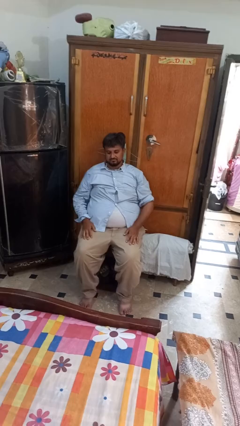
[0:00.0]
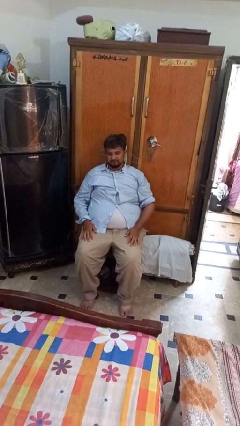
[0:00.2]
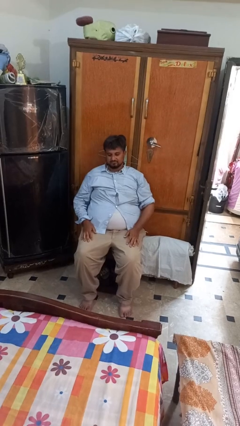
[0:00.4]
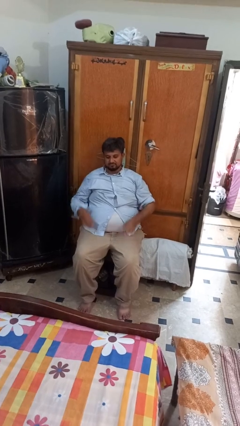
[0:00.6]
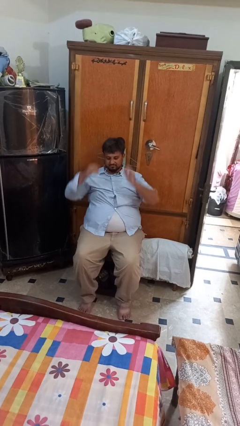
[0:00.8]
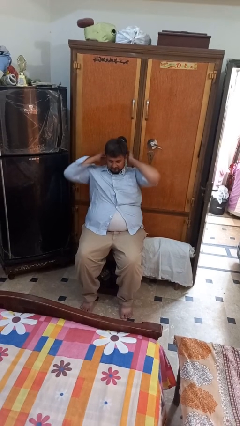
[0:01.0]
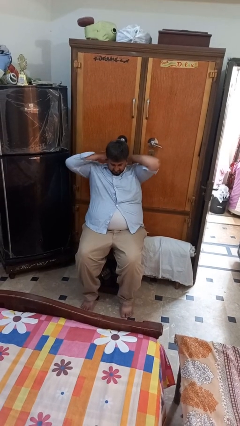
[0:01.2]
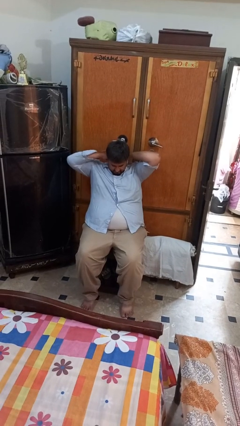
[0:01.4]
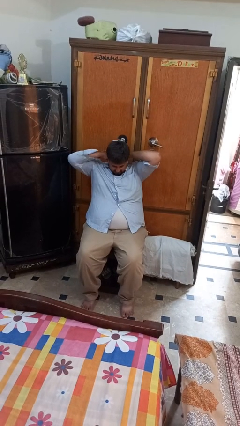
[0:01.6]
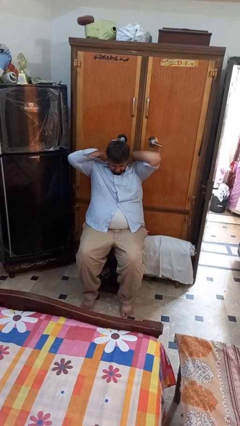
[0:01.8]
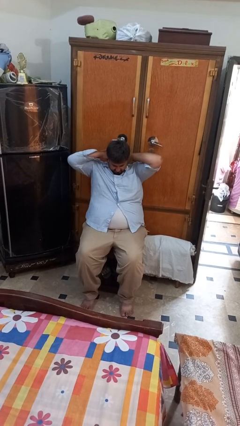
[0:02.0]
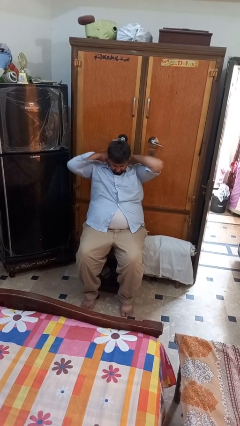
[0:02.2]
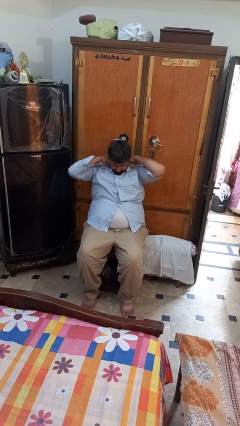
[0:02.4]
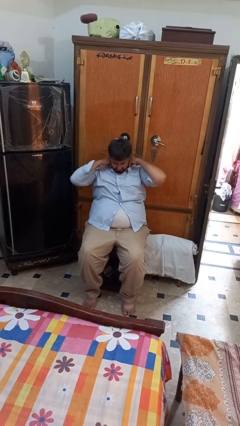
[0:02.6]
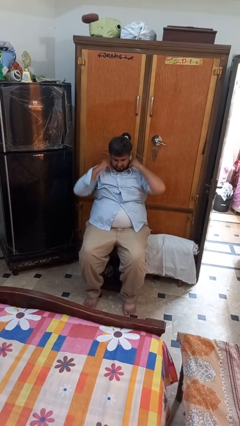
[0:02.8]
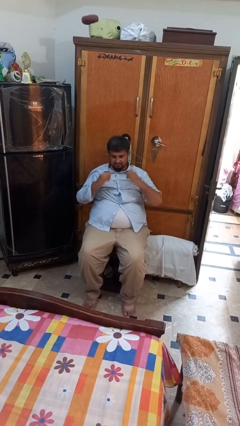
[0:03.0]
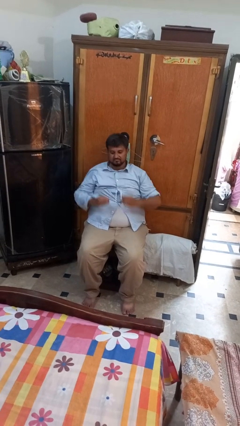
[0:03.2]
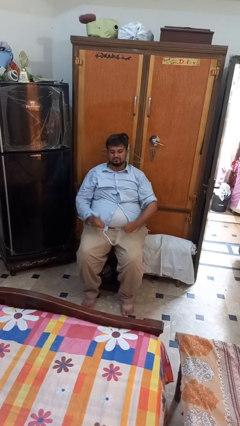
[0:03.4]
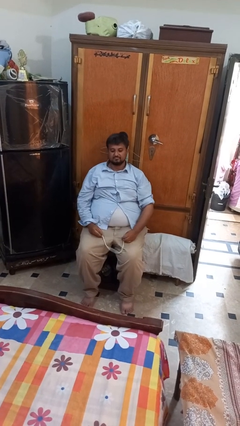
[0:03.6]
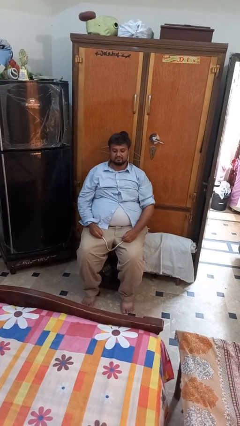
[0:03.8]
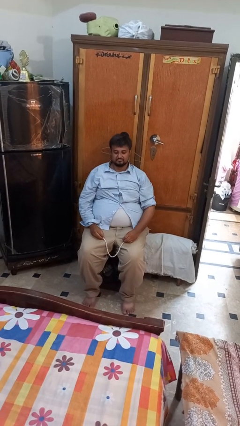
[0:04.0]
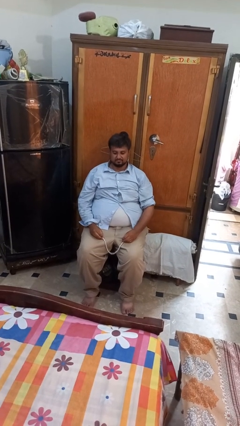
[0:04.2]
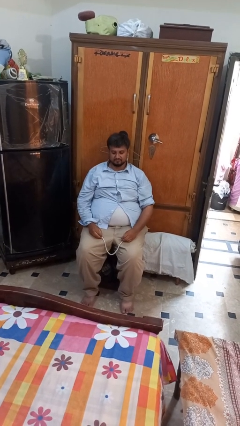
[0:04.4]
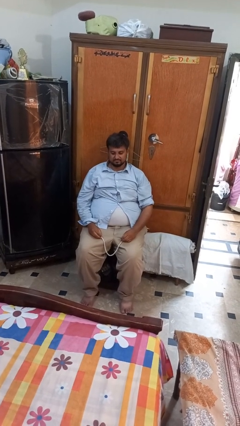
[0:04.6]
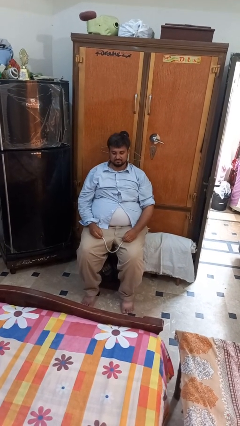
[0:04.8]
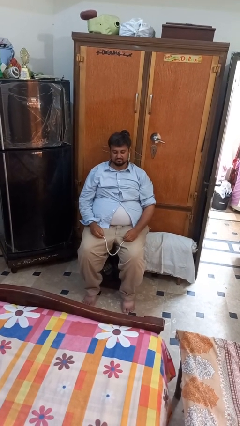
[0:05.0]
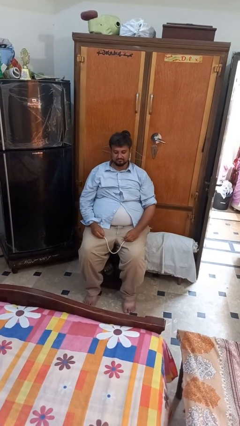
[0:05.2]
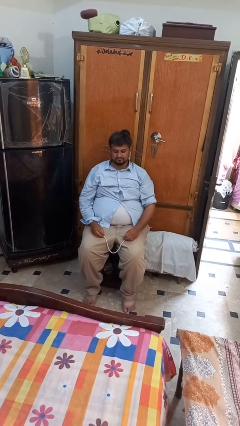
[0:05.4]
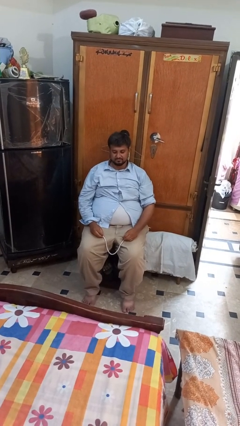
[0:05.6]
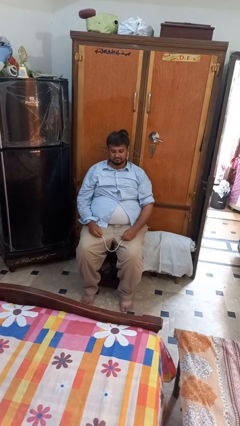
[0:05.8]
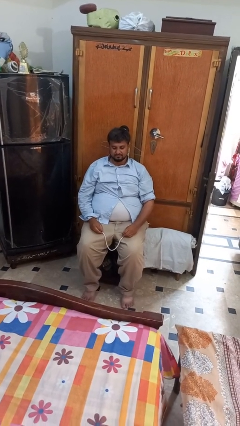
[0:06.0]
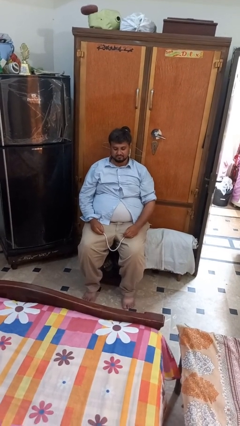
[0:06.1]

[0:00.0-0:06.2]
person takes off necklace

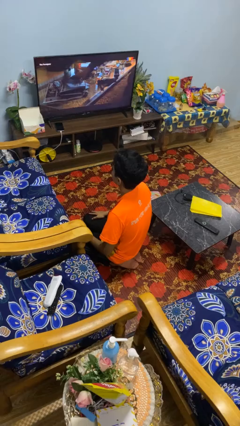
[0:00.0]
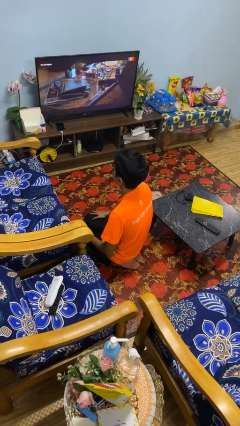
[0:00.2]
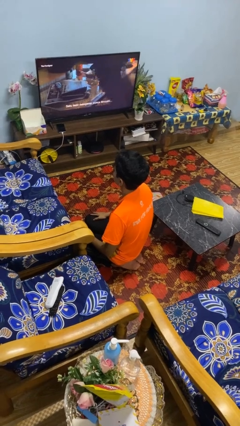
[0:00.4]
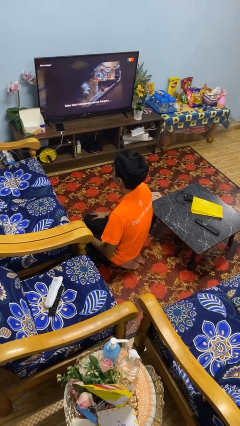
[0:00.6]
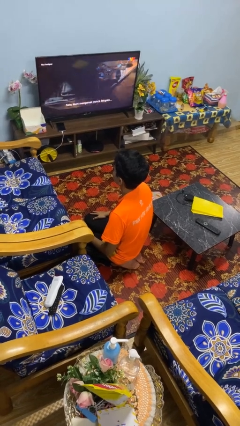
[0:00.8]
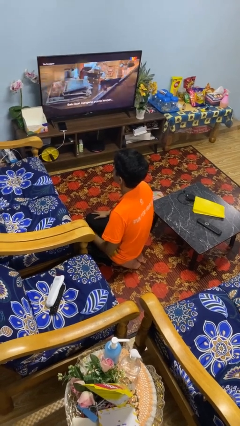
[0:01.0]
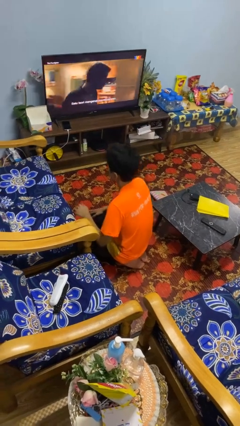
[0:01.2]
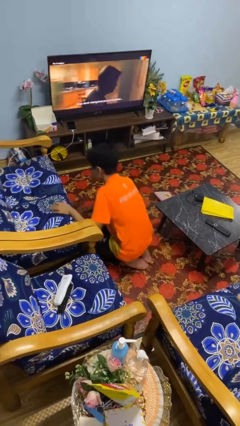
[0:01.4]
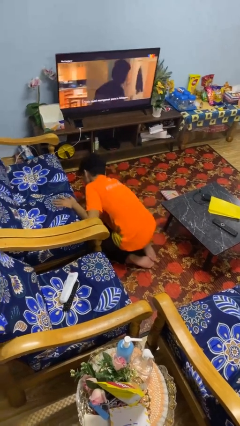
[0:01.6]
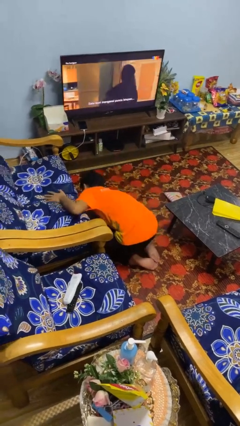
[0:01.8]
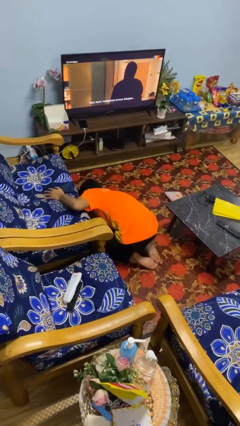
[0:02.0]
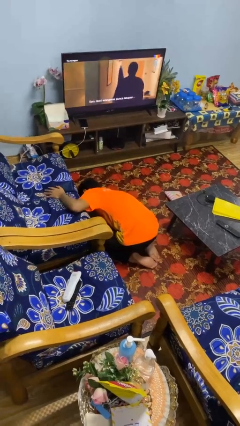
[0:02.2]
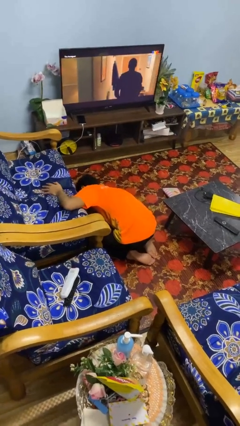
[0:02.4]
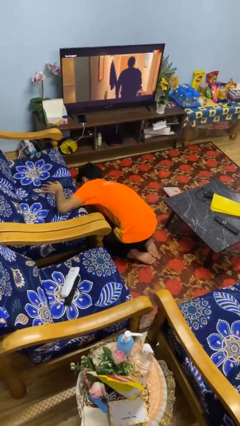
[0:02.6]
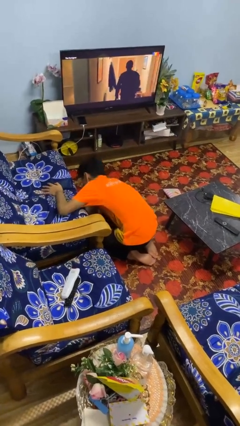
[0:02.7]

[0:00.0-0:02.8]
person searches under couch

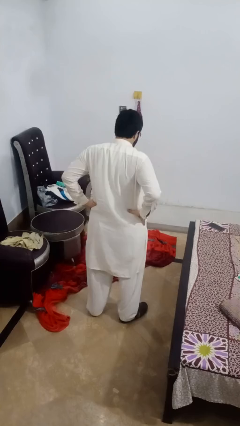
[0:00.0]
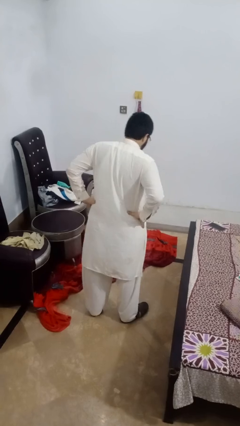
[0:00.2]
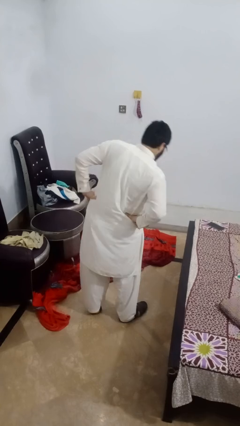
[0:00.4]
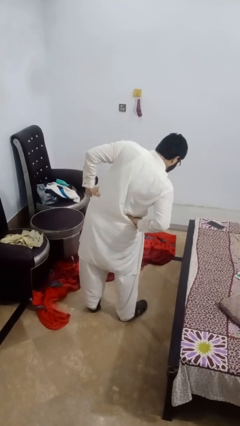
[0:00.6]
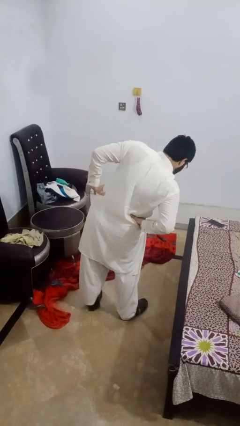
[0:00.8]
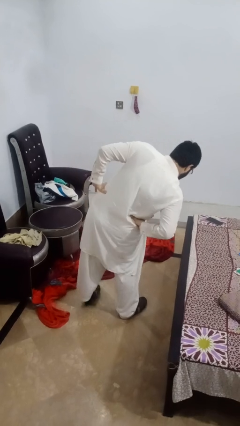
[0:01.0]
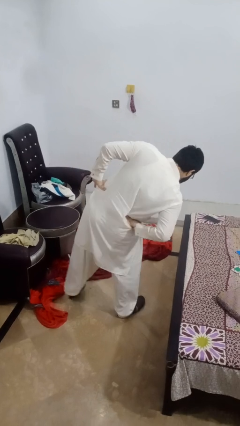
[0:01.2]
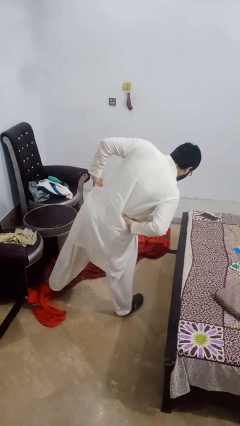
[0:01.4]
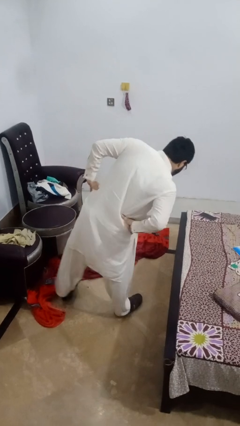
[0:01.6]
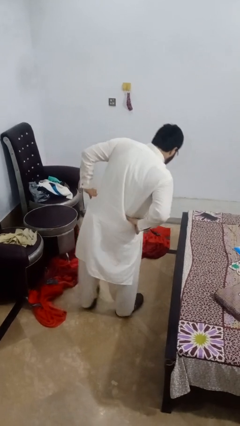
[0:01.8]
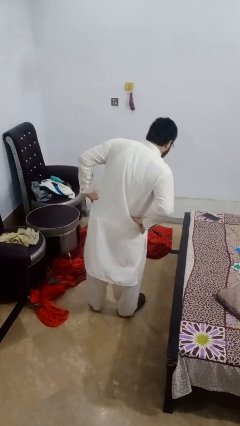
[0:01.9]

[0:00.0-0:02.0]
person stretches arms to side

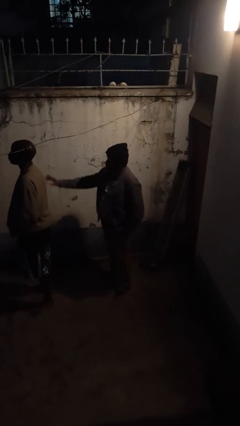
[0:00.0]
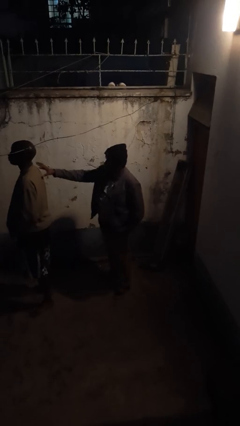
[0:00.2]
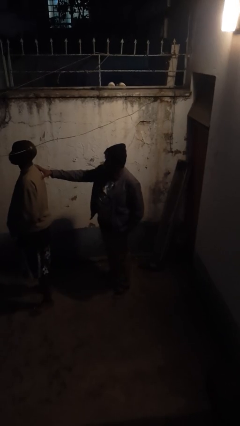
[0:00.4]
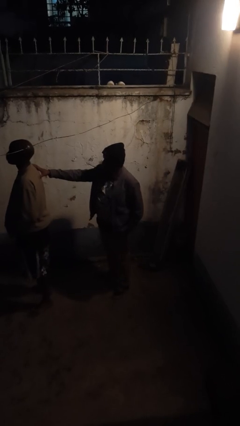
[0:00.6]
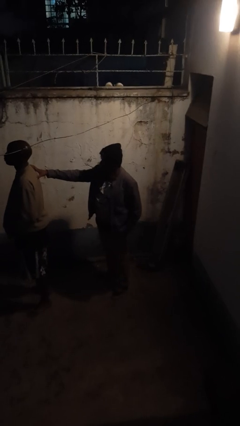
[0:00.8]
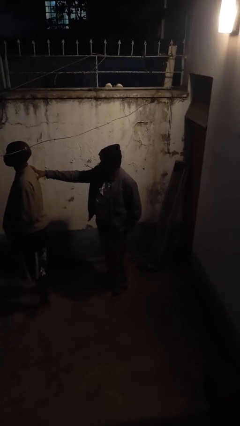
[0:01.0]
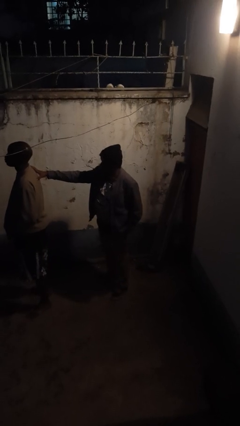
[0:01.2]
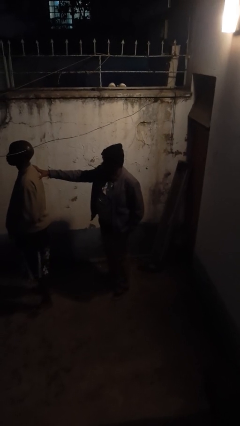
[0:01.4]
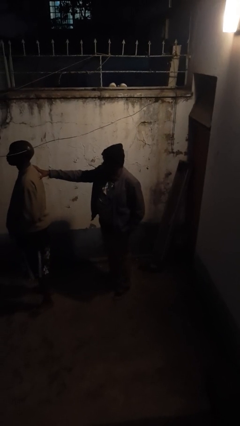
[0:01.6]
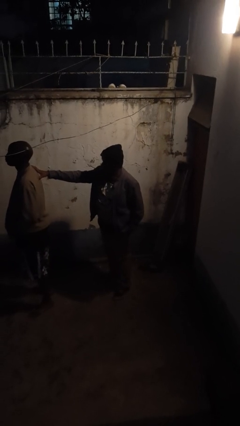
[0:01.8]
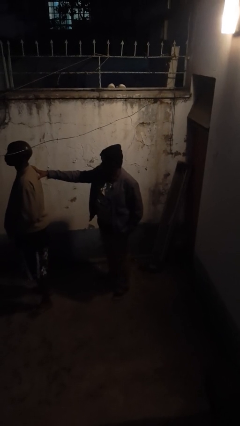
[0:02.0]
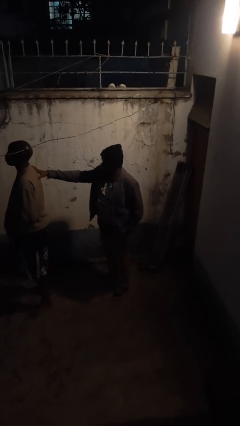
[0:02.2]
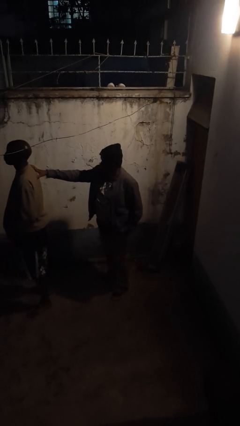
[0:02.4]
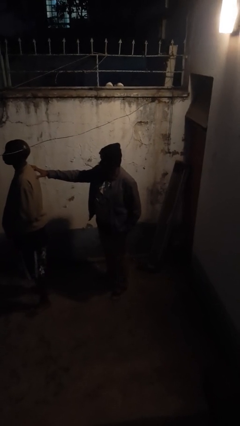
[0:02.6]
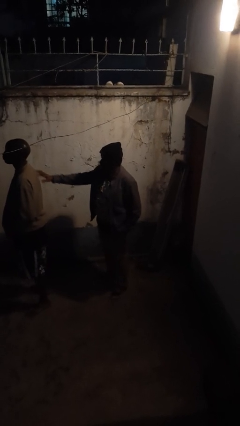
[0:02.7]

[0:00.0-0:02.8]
person touches back of person

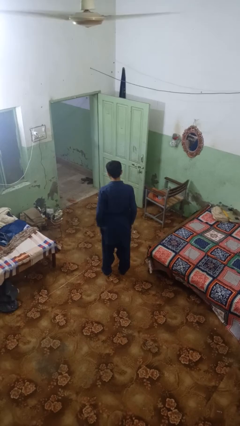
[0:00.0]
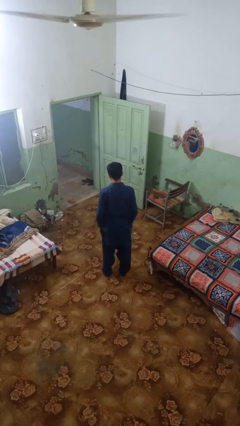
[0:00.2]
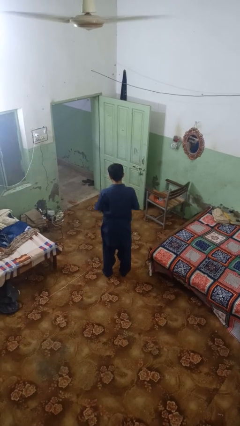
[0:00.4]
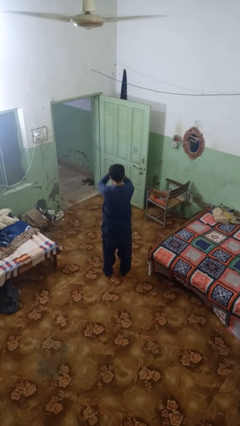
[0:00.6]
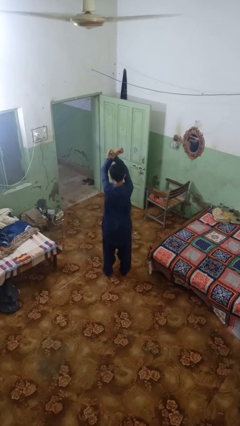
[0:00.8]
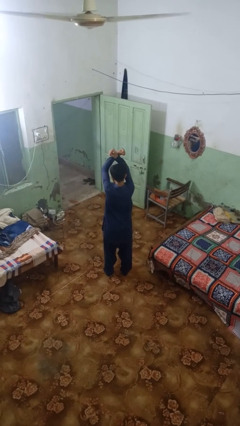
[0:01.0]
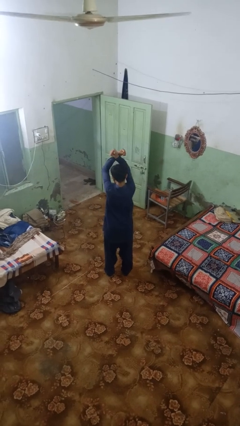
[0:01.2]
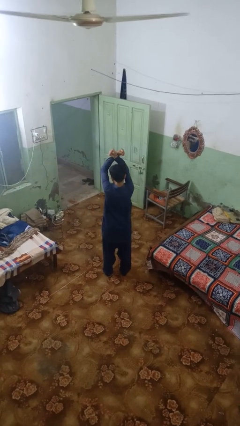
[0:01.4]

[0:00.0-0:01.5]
person crosses arms

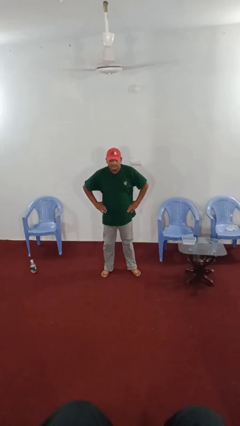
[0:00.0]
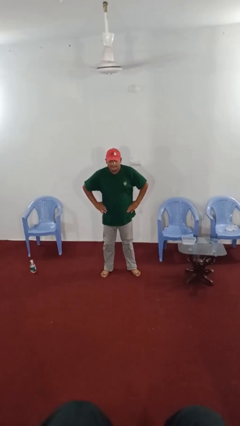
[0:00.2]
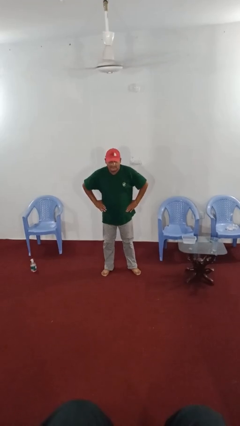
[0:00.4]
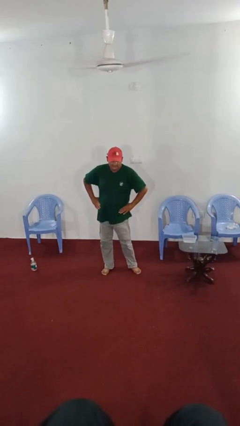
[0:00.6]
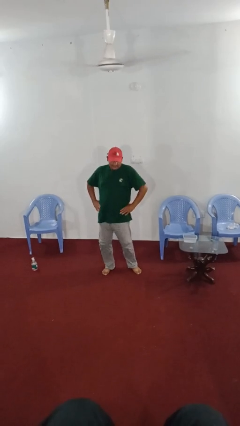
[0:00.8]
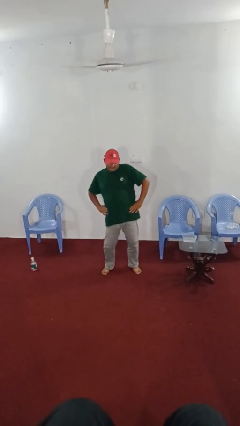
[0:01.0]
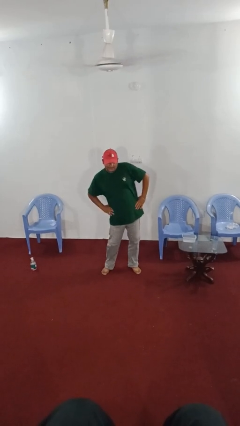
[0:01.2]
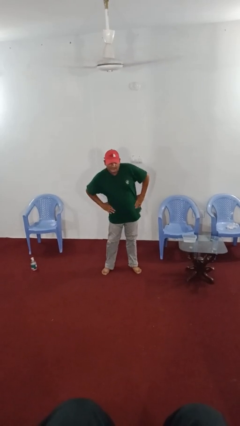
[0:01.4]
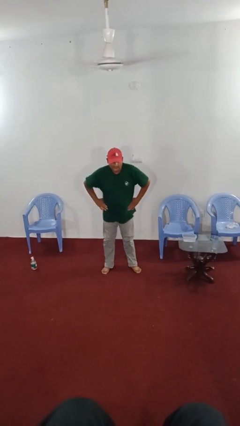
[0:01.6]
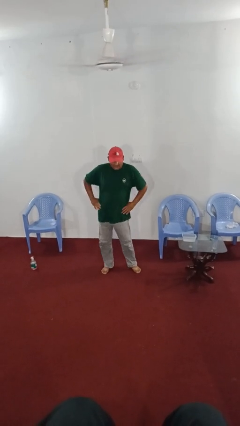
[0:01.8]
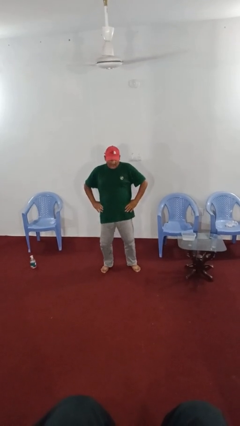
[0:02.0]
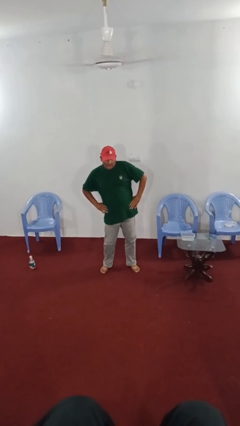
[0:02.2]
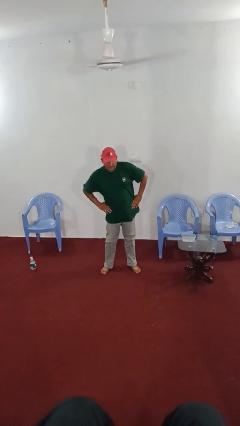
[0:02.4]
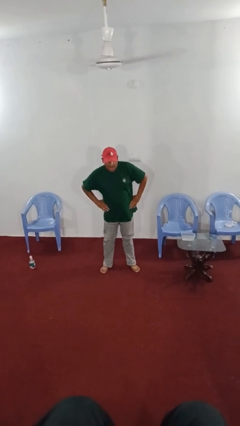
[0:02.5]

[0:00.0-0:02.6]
person wiggles hips
